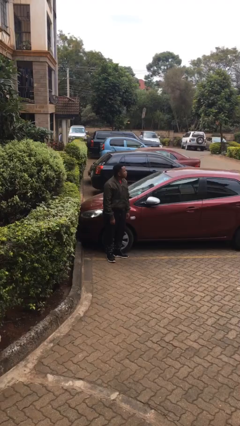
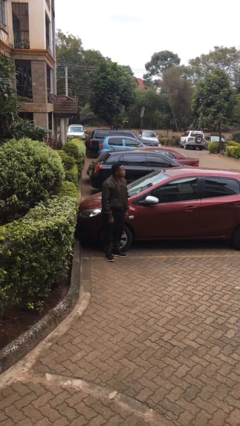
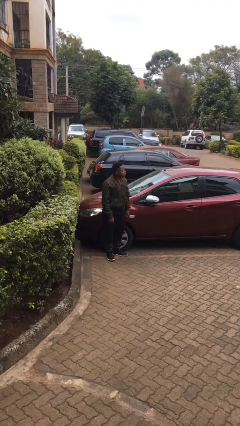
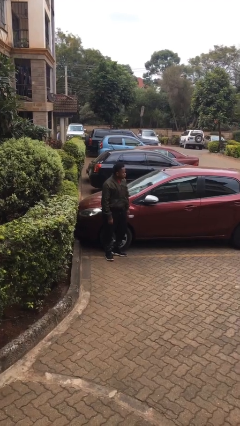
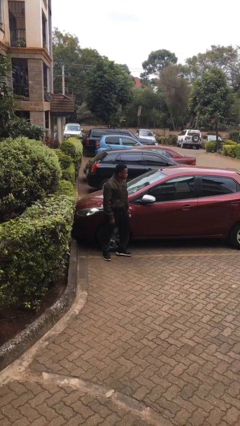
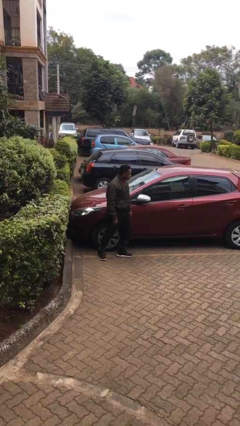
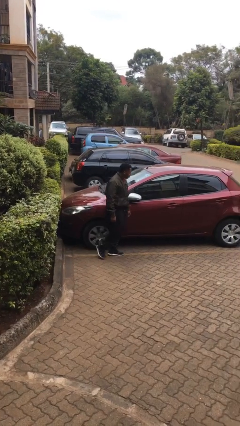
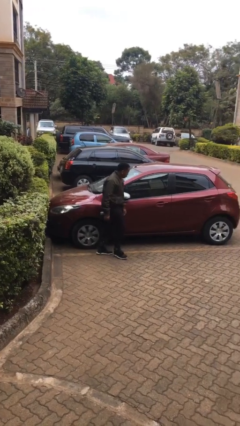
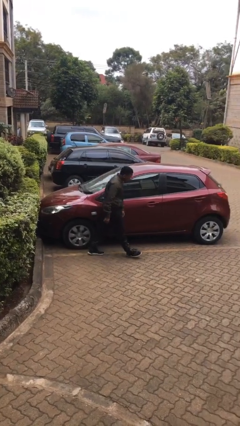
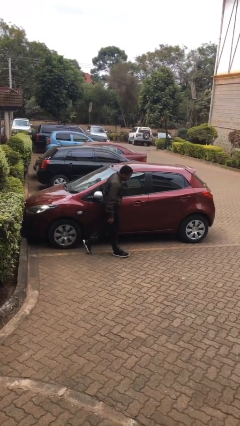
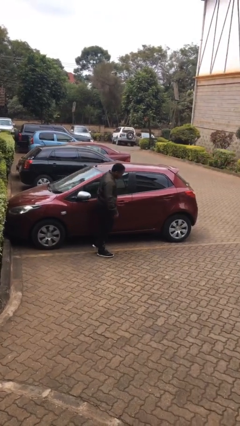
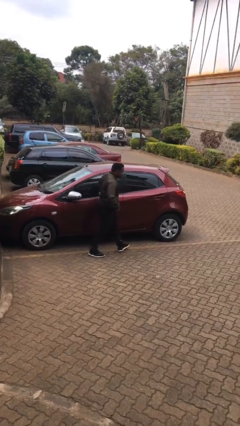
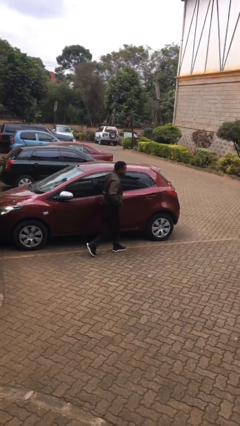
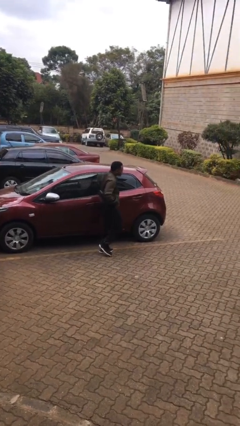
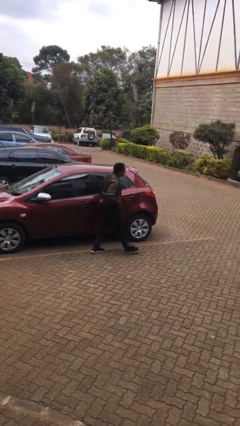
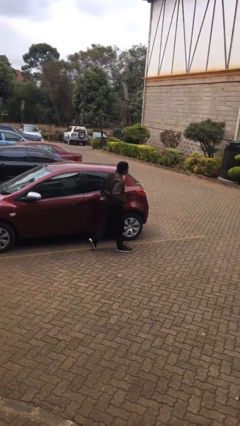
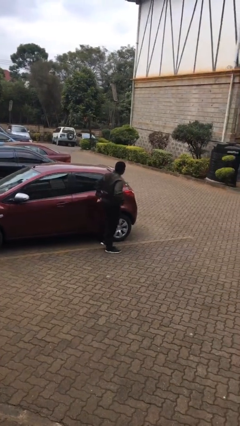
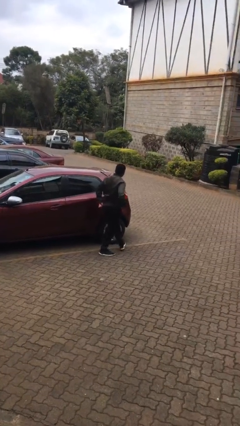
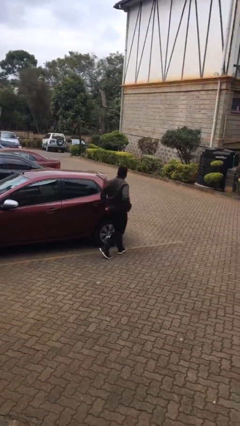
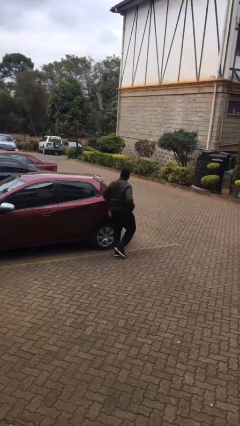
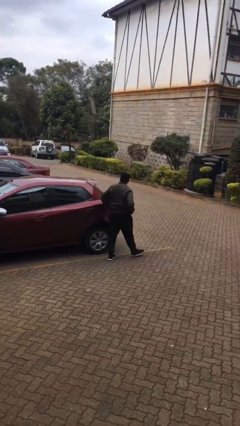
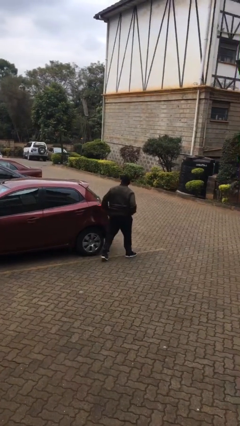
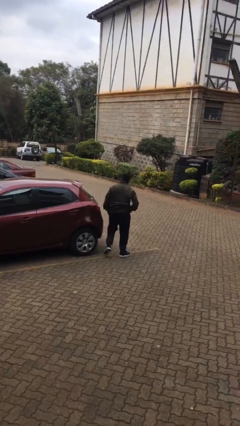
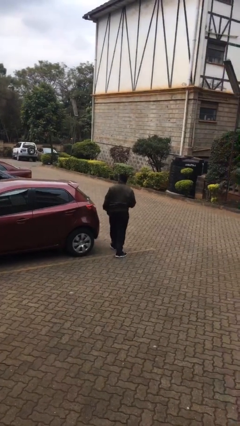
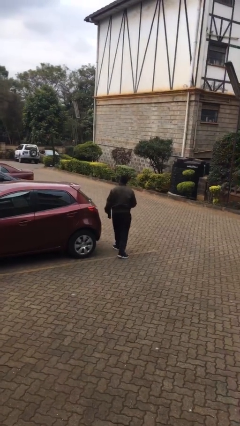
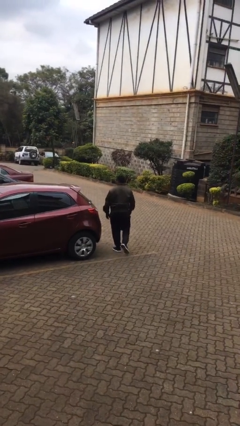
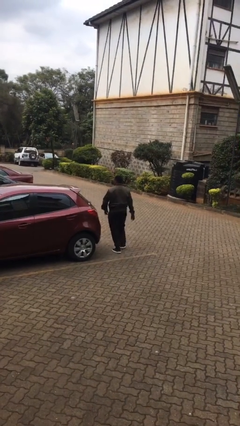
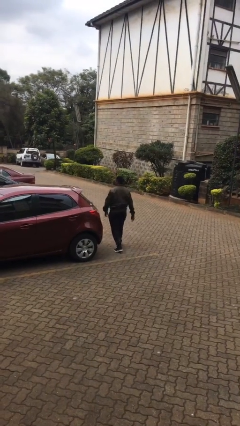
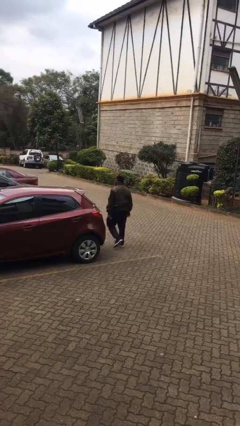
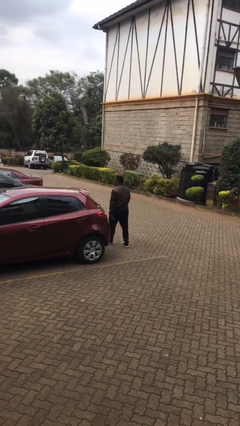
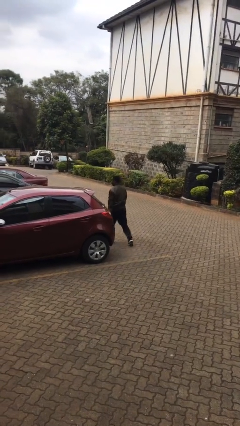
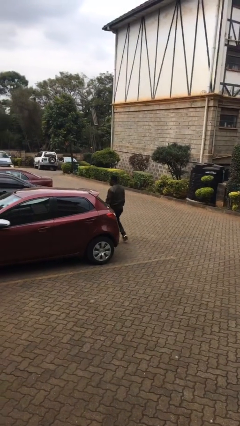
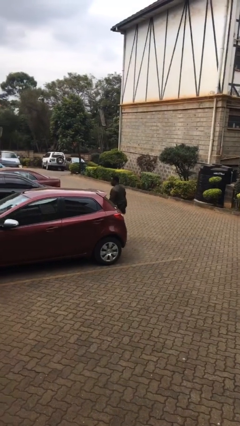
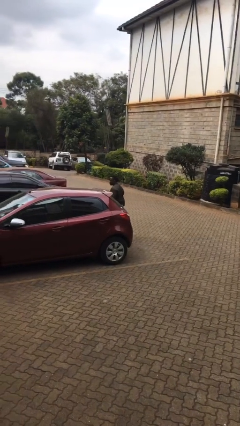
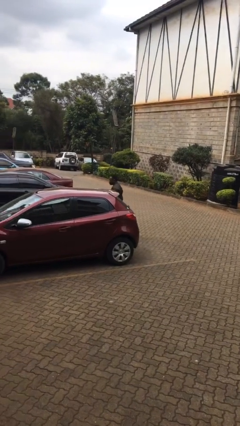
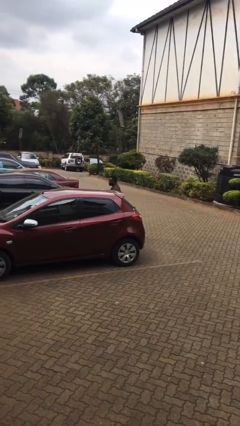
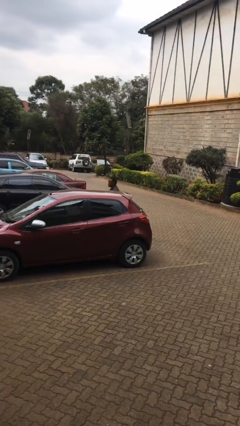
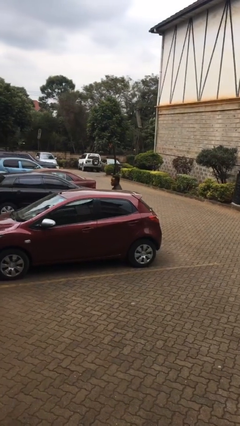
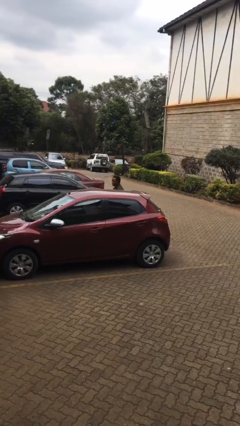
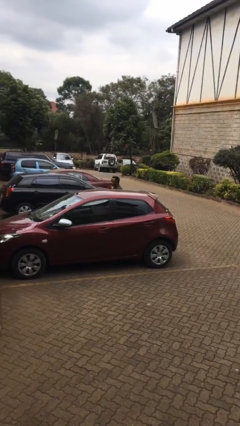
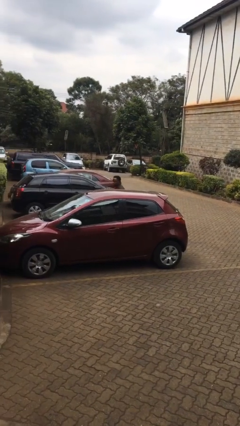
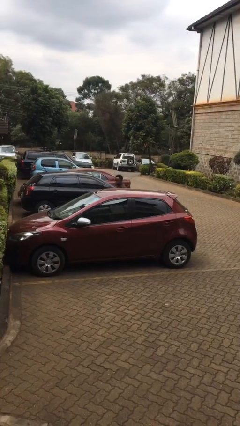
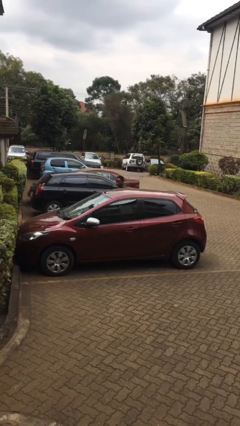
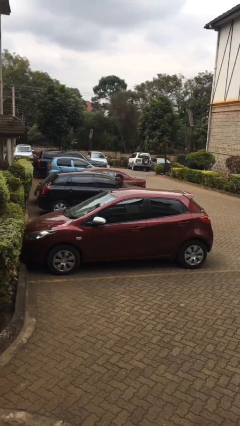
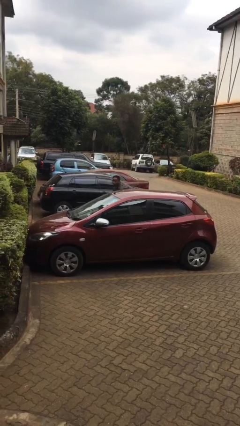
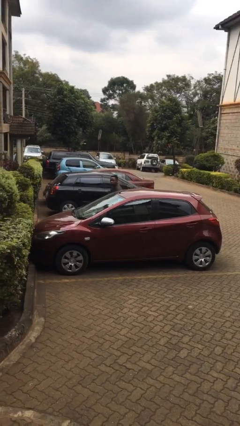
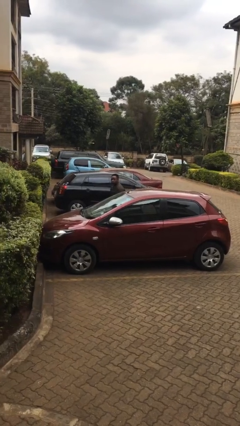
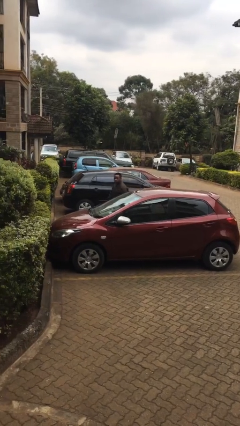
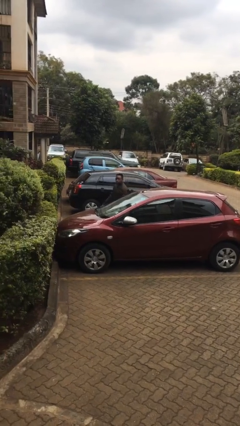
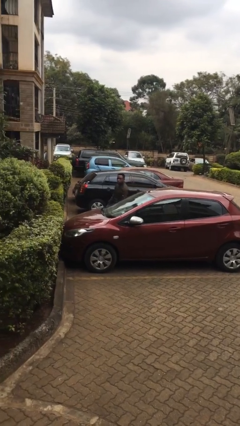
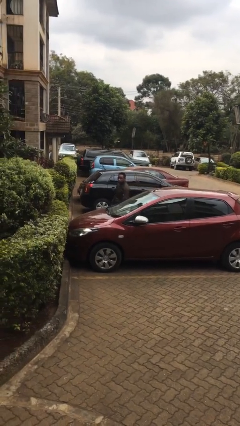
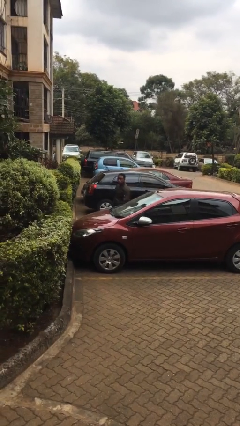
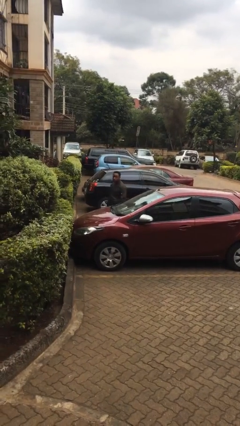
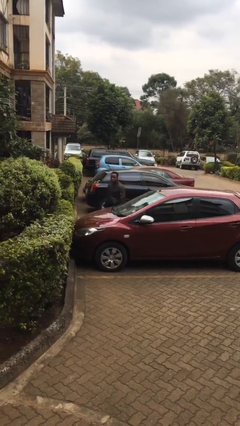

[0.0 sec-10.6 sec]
person walks around car

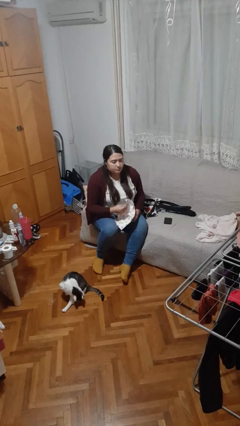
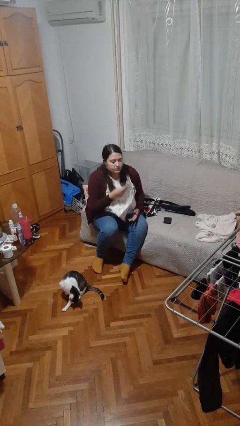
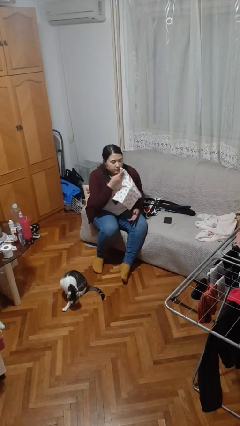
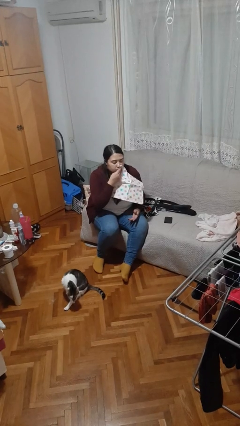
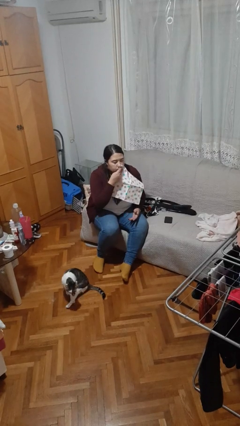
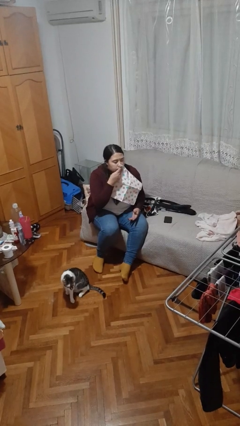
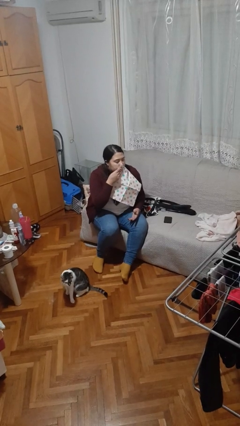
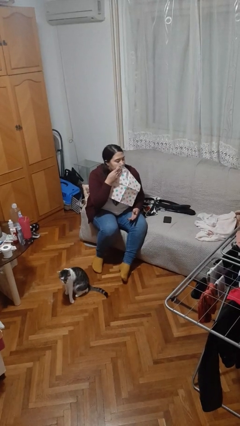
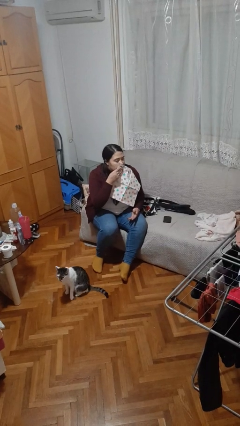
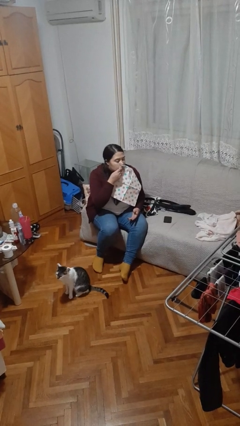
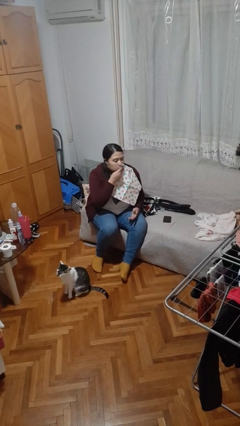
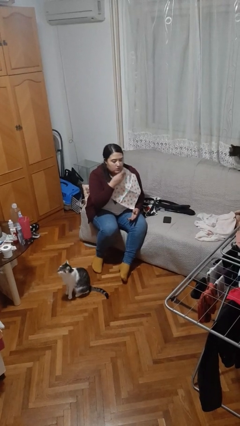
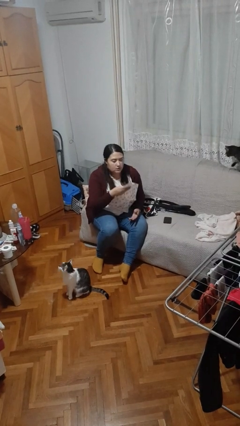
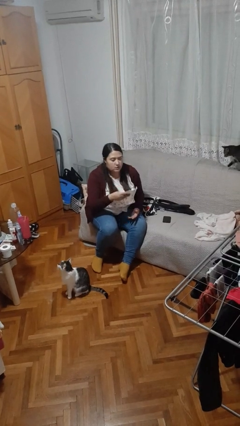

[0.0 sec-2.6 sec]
person wipes mouth with napkin

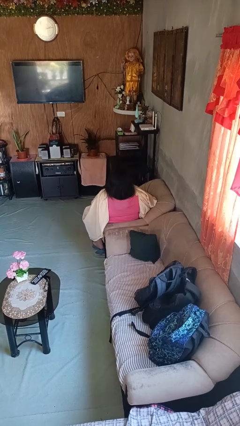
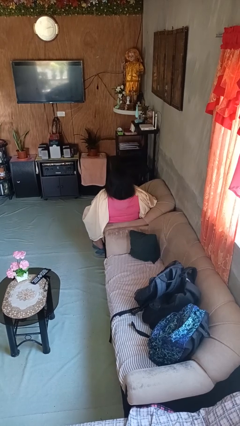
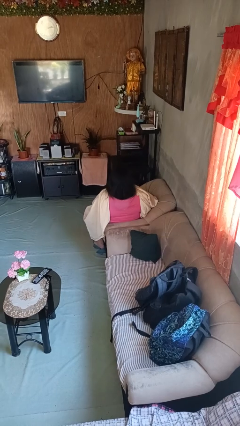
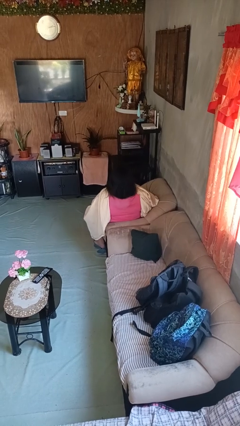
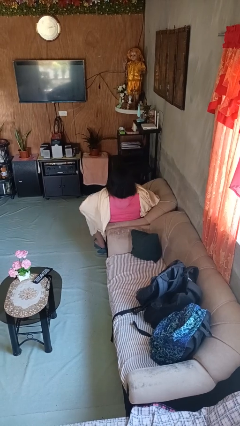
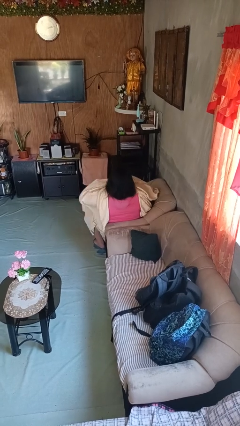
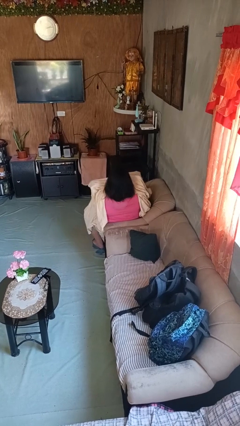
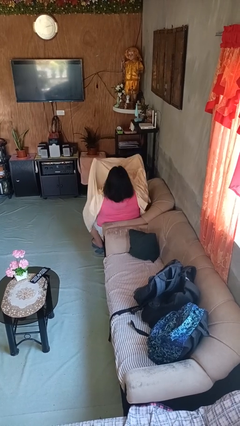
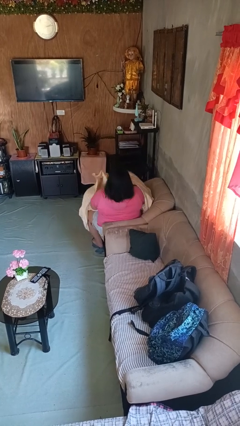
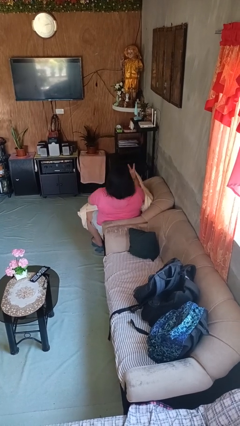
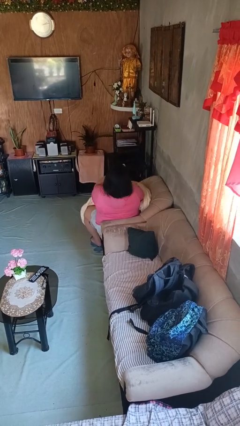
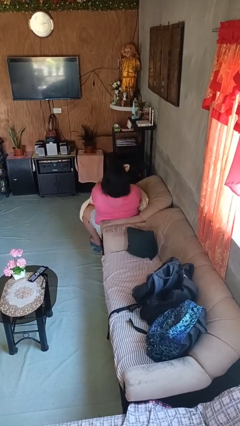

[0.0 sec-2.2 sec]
person uncovers with blanket

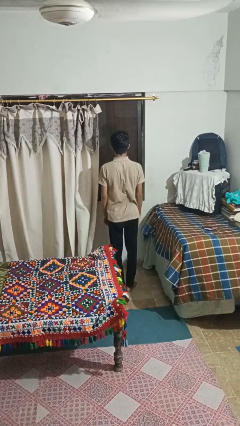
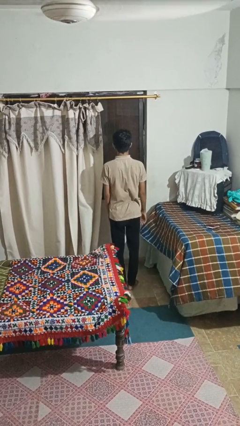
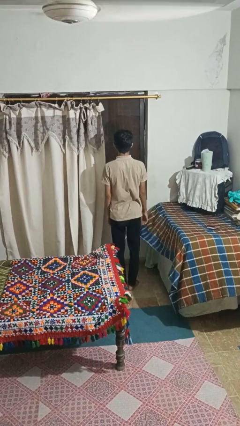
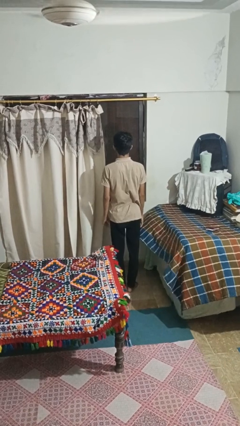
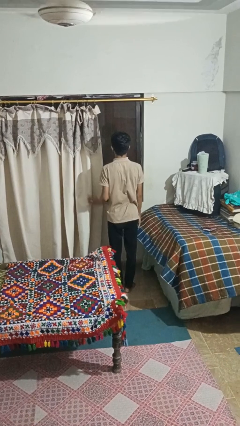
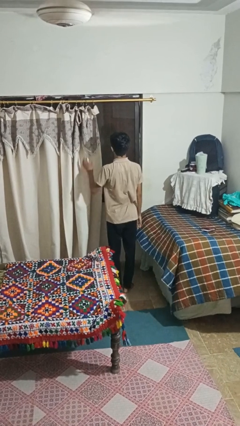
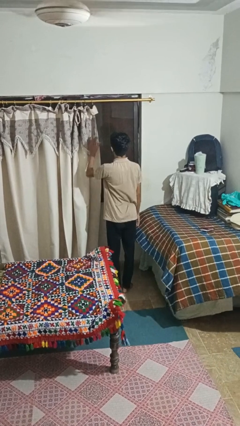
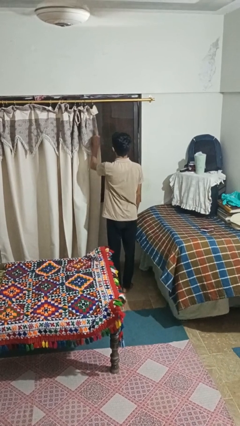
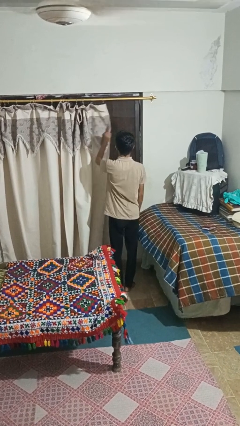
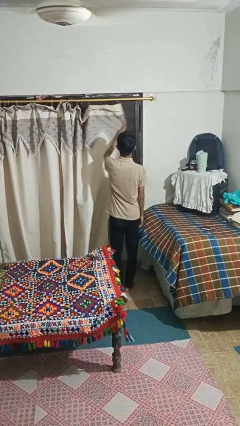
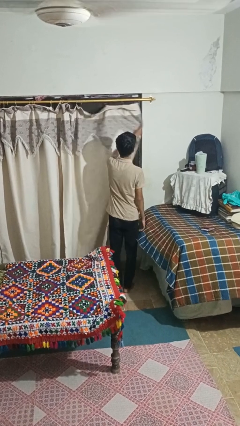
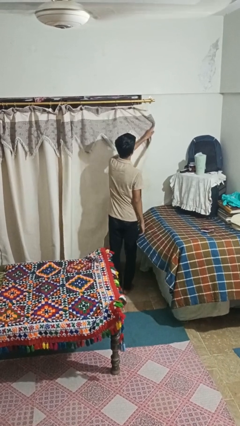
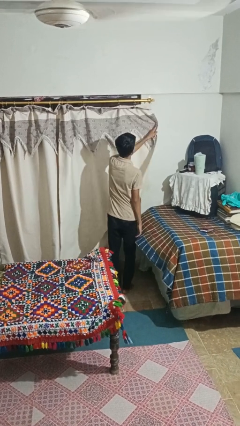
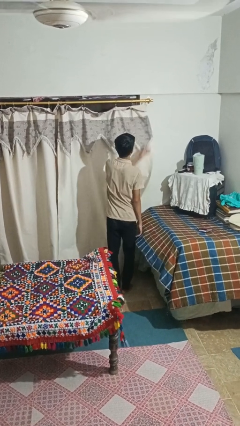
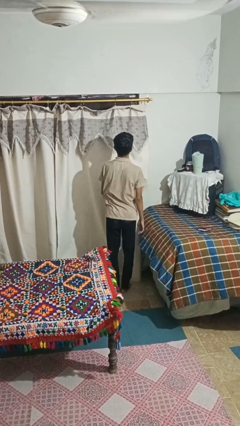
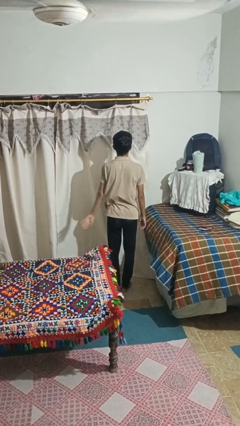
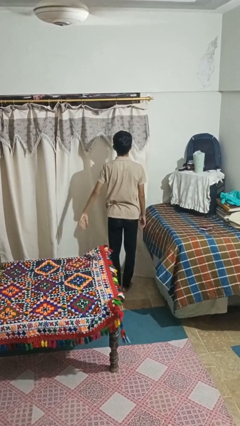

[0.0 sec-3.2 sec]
person closes curtains
